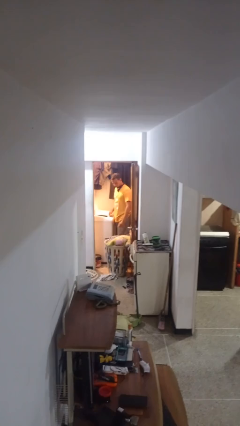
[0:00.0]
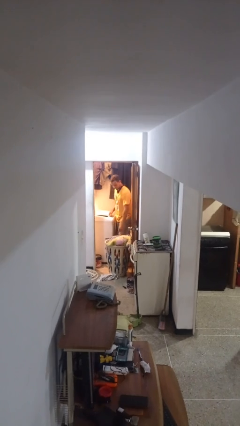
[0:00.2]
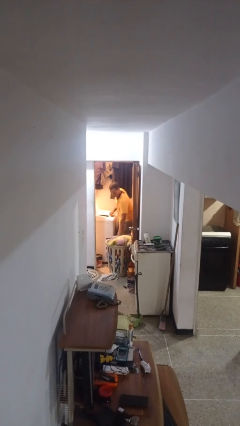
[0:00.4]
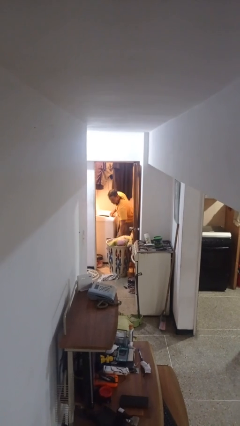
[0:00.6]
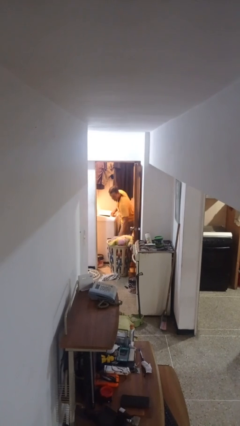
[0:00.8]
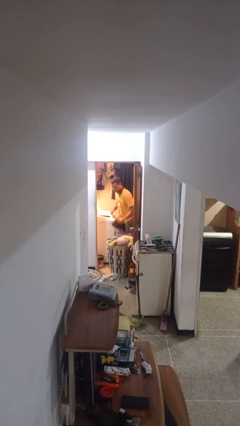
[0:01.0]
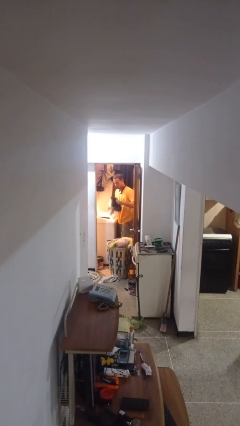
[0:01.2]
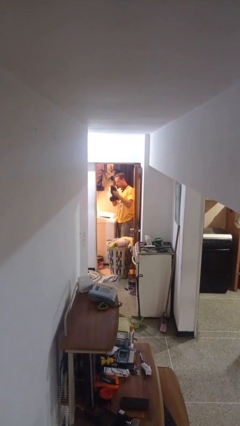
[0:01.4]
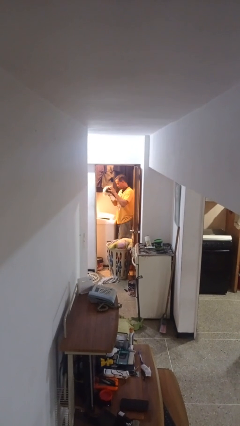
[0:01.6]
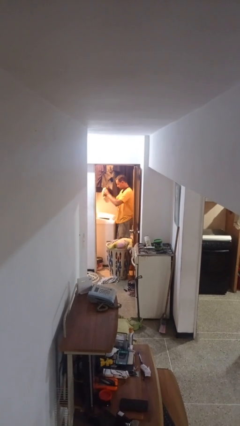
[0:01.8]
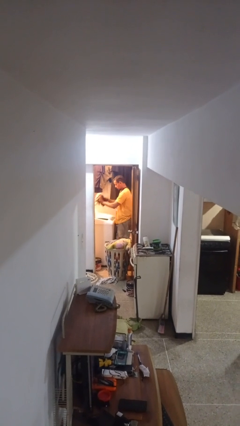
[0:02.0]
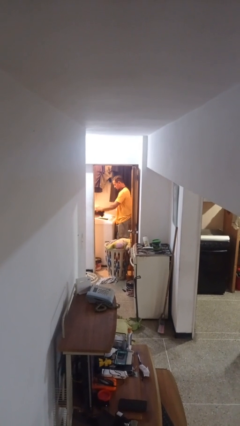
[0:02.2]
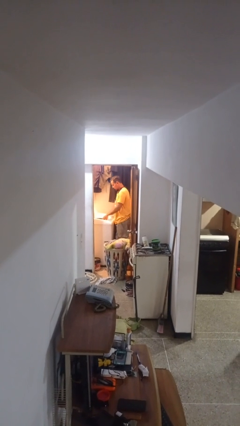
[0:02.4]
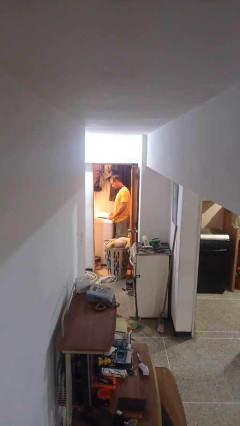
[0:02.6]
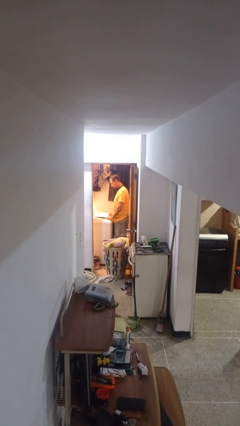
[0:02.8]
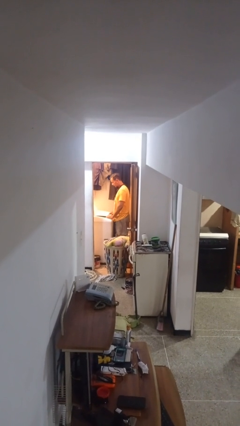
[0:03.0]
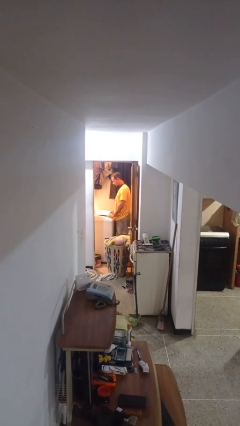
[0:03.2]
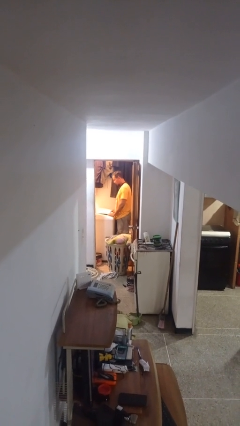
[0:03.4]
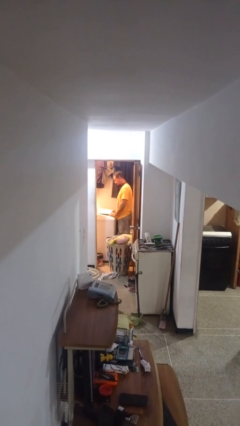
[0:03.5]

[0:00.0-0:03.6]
person loads clotheswasher

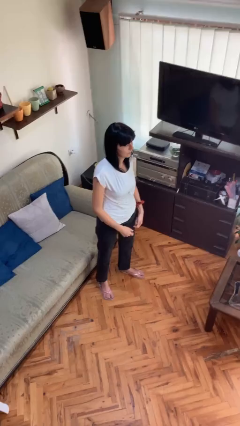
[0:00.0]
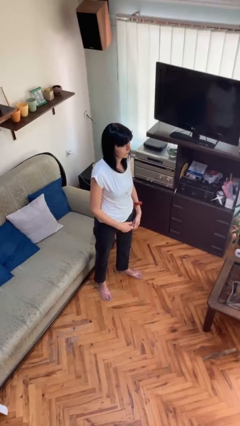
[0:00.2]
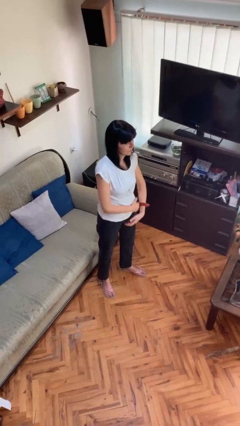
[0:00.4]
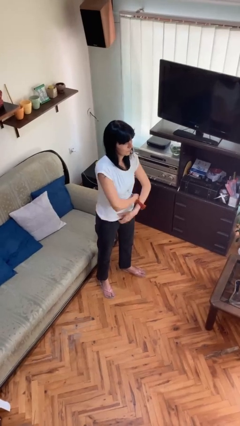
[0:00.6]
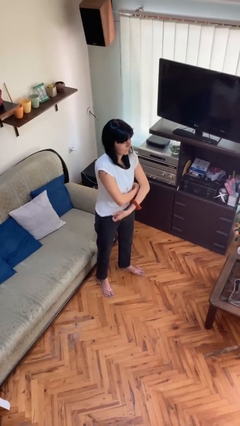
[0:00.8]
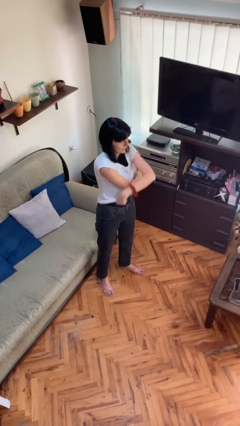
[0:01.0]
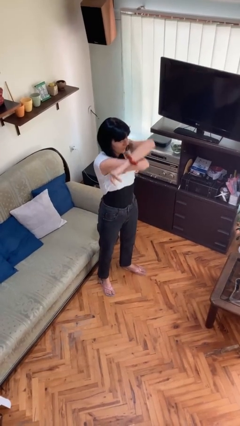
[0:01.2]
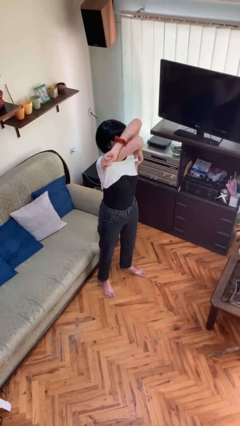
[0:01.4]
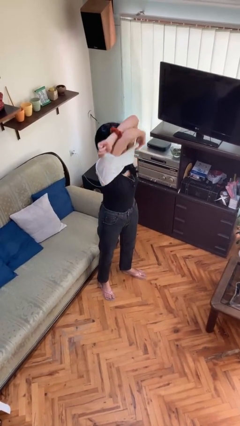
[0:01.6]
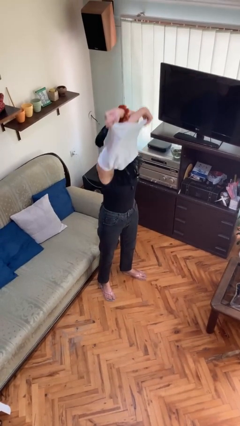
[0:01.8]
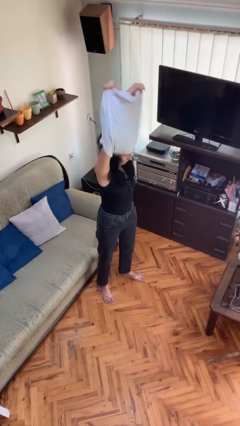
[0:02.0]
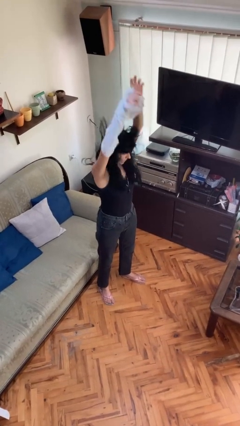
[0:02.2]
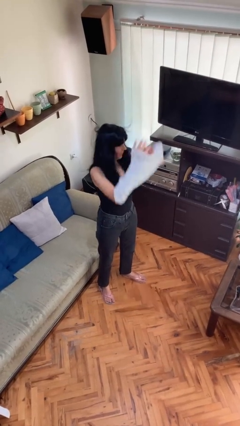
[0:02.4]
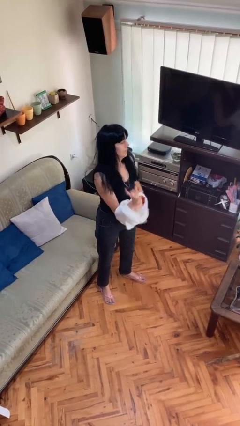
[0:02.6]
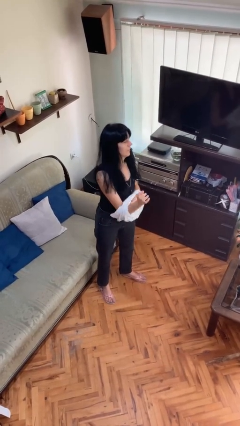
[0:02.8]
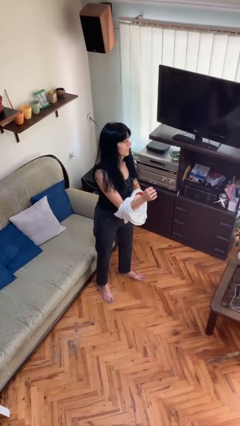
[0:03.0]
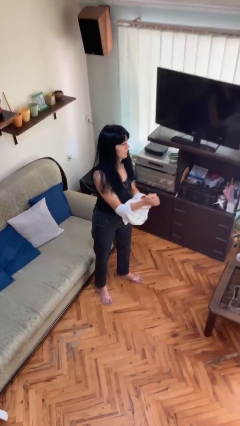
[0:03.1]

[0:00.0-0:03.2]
person takes off shirt

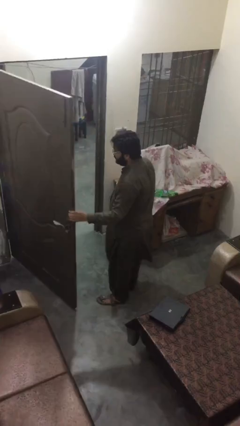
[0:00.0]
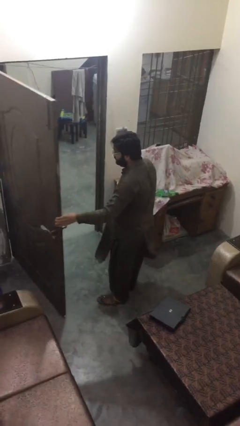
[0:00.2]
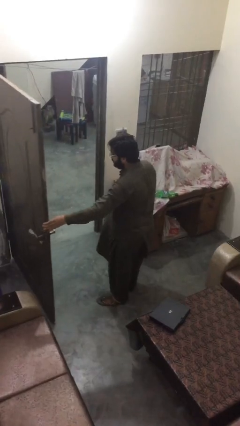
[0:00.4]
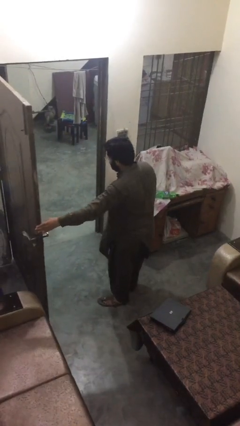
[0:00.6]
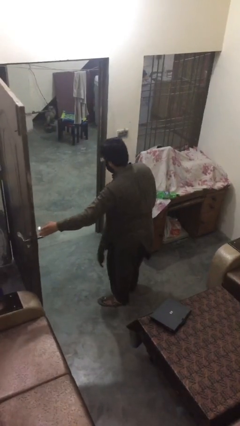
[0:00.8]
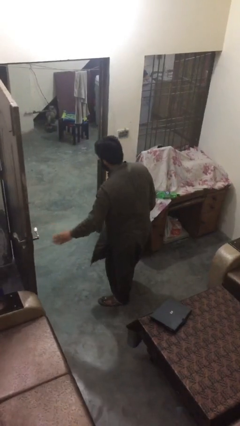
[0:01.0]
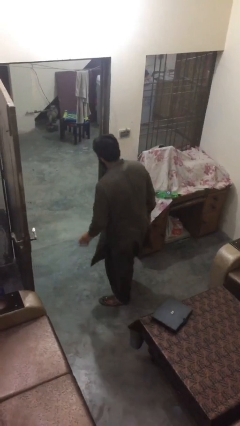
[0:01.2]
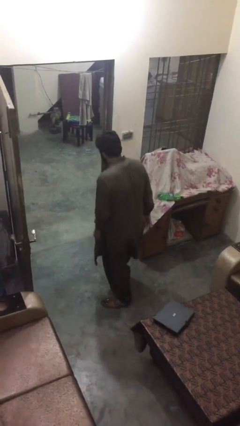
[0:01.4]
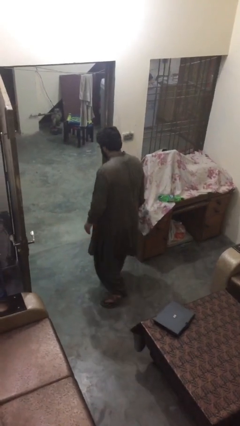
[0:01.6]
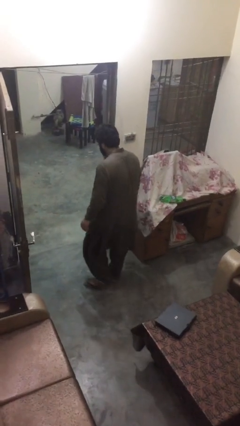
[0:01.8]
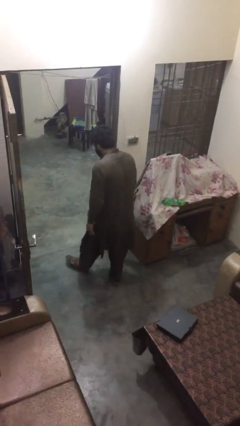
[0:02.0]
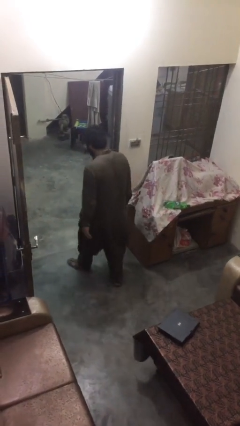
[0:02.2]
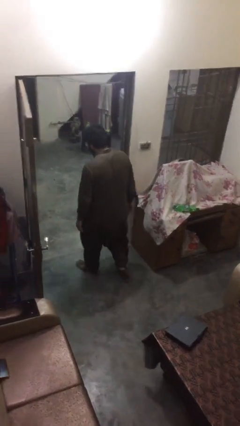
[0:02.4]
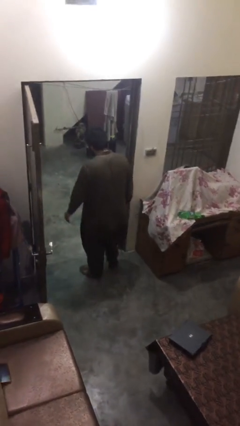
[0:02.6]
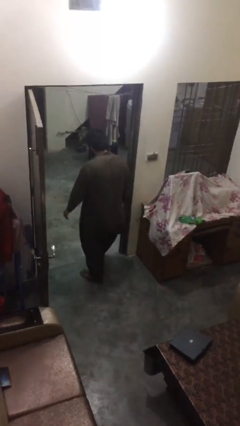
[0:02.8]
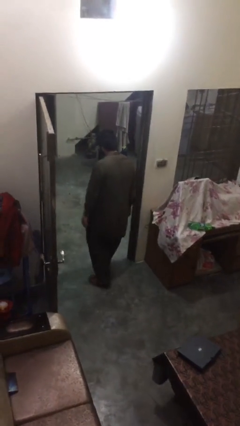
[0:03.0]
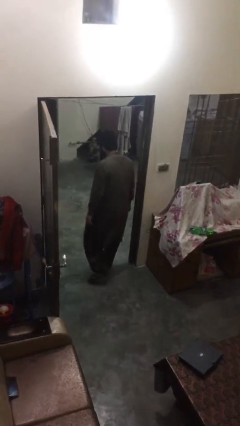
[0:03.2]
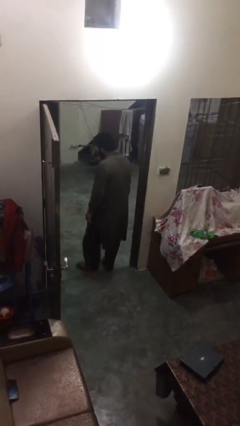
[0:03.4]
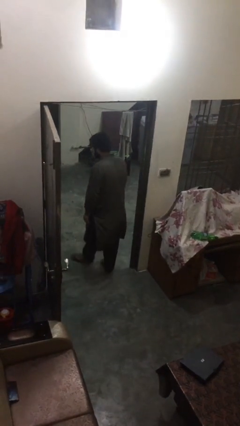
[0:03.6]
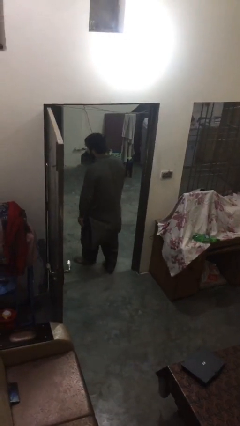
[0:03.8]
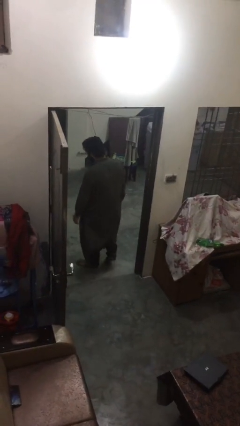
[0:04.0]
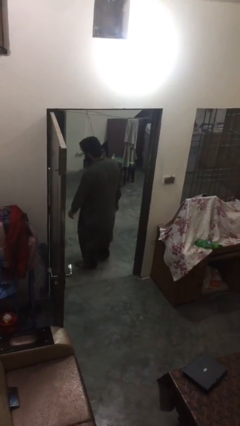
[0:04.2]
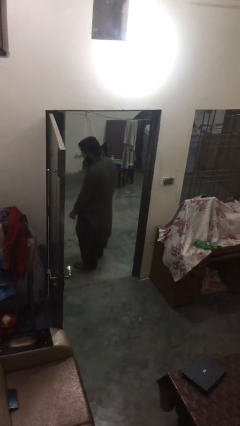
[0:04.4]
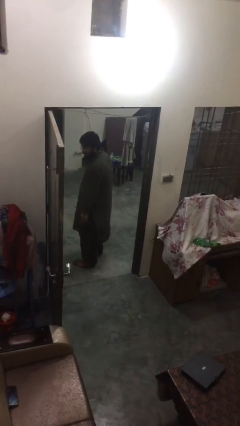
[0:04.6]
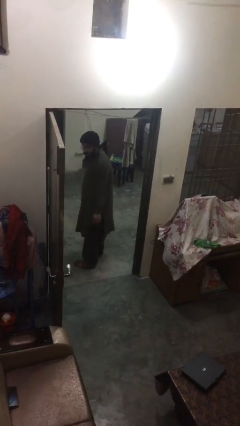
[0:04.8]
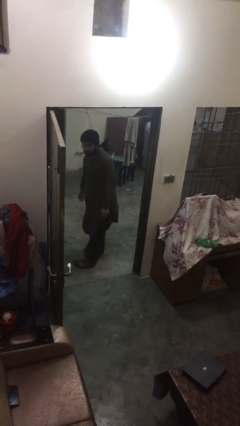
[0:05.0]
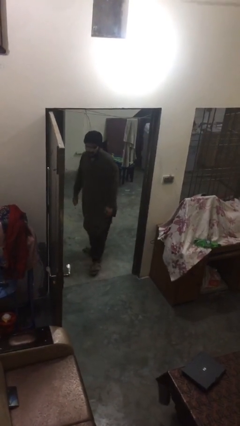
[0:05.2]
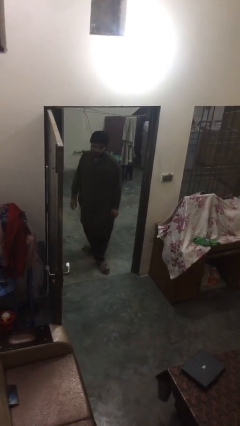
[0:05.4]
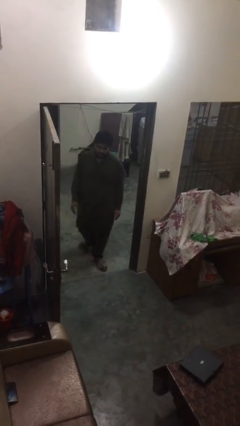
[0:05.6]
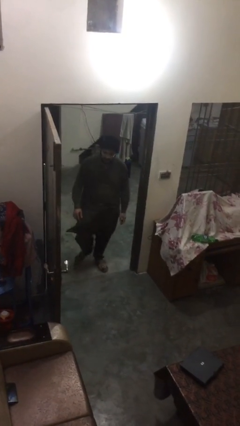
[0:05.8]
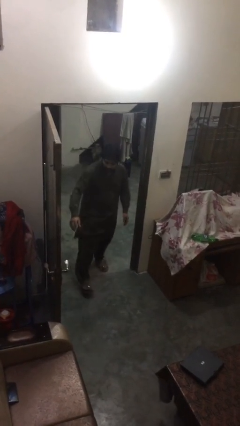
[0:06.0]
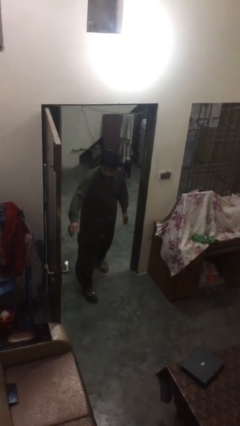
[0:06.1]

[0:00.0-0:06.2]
person exits scene through structure

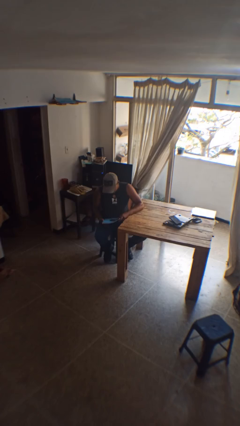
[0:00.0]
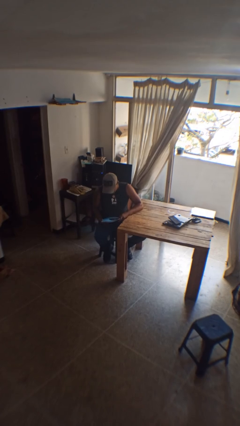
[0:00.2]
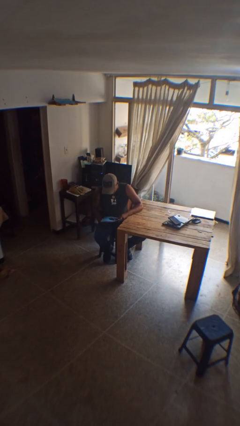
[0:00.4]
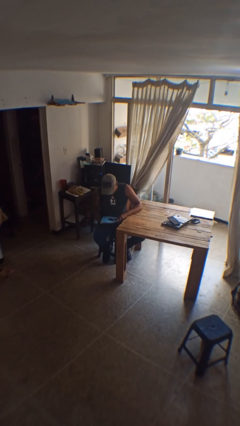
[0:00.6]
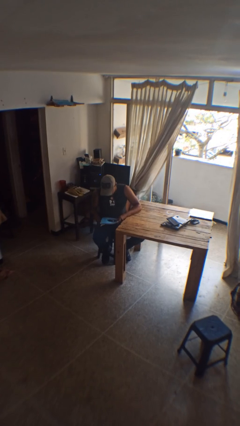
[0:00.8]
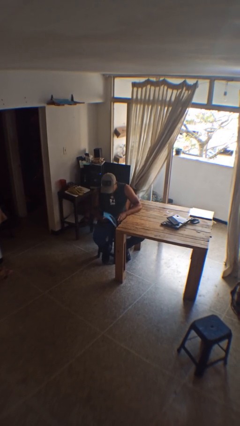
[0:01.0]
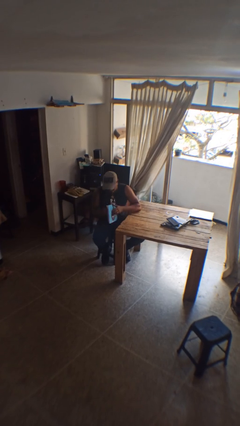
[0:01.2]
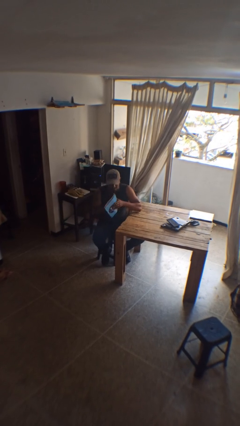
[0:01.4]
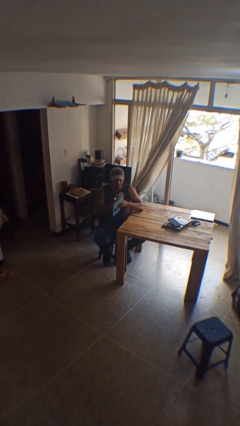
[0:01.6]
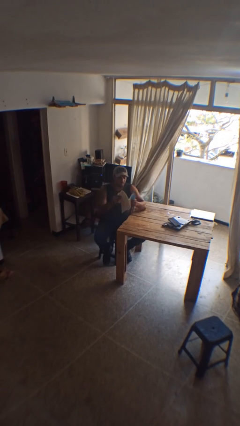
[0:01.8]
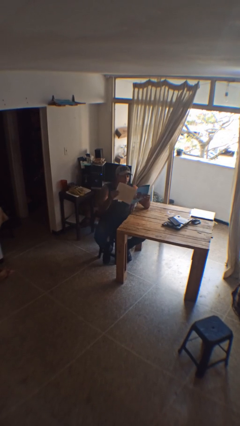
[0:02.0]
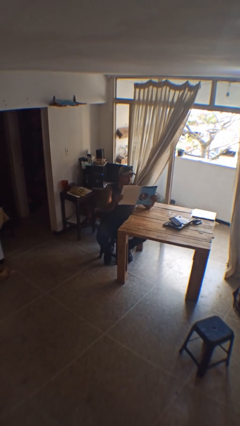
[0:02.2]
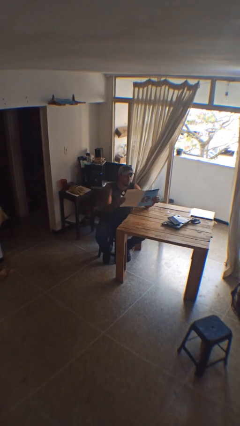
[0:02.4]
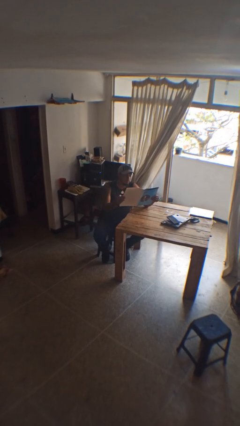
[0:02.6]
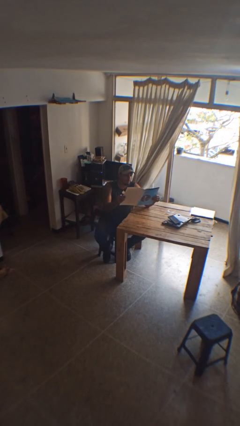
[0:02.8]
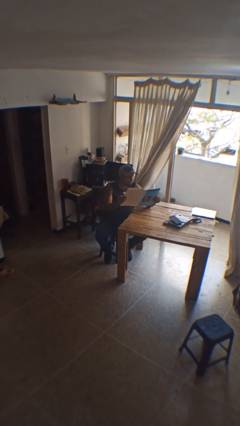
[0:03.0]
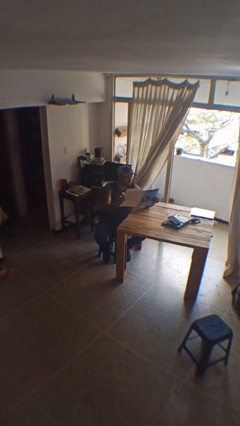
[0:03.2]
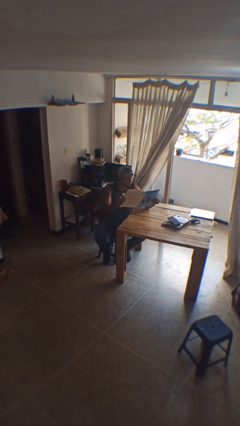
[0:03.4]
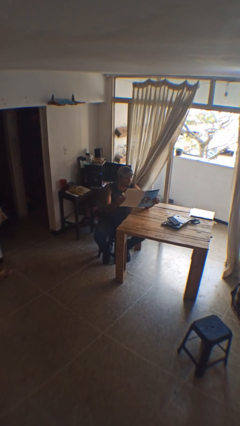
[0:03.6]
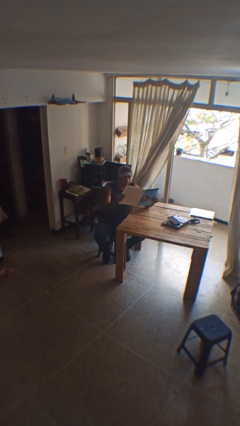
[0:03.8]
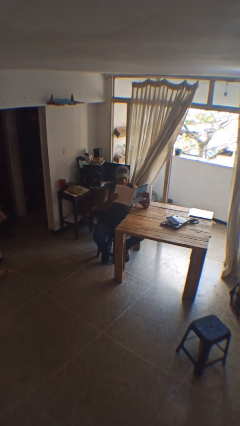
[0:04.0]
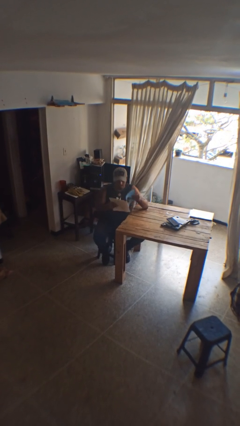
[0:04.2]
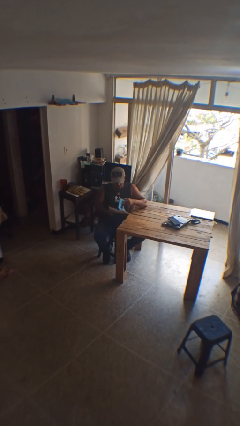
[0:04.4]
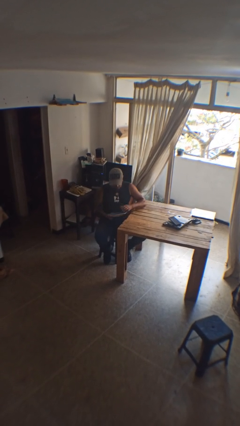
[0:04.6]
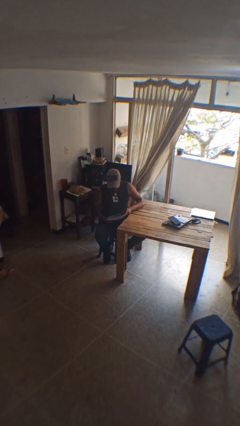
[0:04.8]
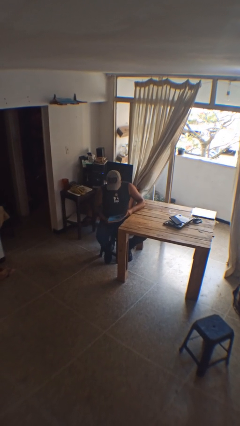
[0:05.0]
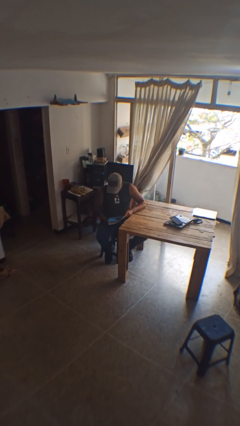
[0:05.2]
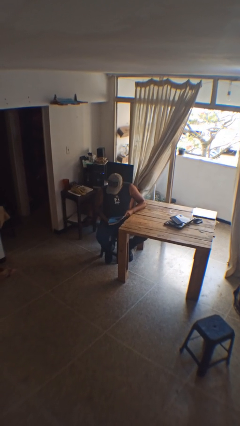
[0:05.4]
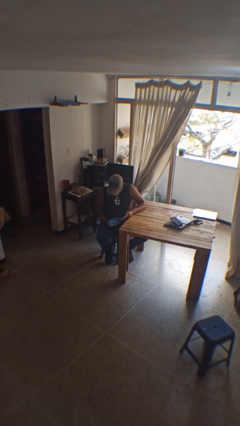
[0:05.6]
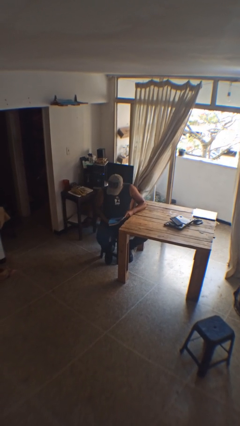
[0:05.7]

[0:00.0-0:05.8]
person reads document
